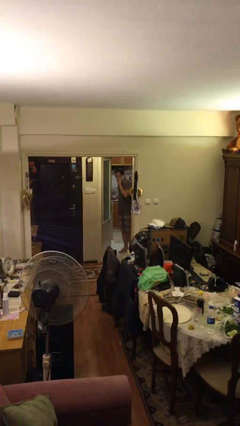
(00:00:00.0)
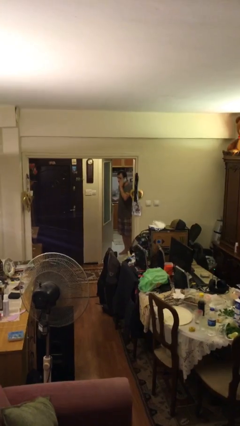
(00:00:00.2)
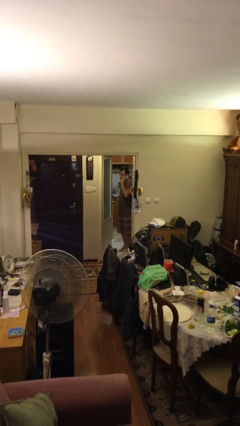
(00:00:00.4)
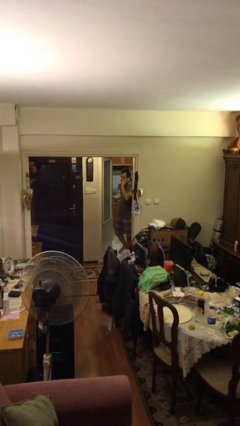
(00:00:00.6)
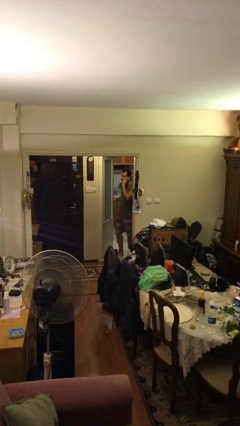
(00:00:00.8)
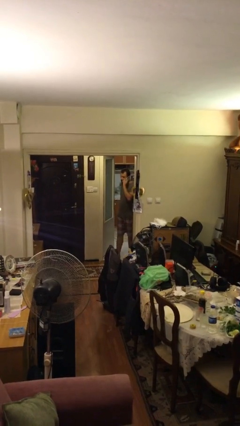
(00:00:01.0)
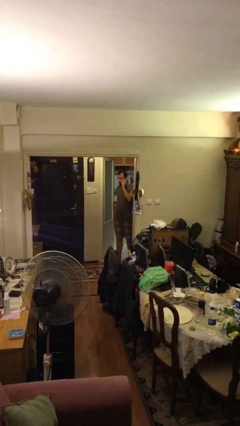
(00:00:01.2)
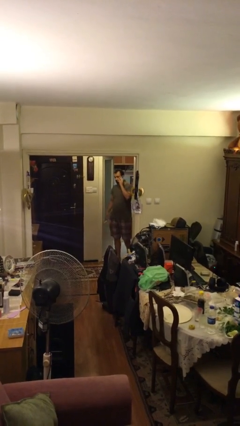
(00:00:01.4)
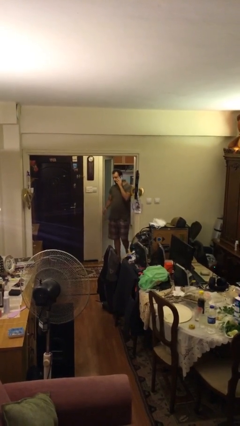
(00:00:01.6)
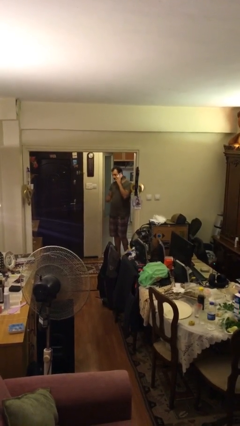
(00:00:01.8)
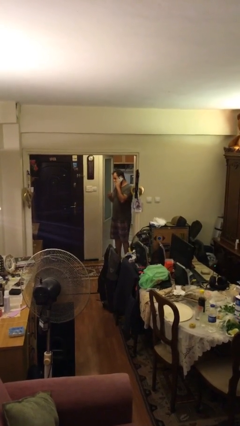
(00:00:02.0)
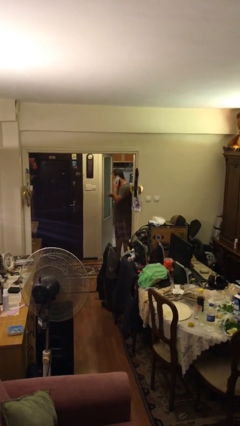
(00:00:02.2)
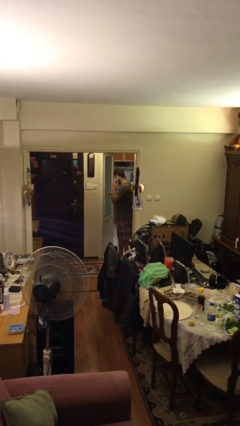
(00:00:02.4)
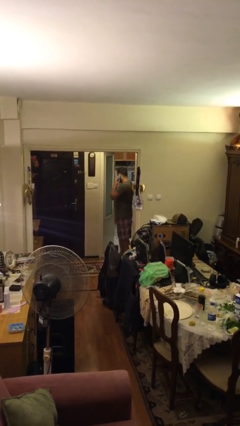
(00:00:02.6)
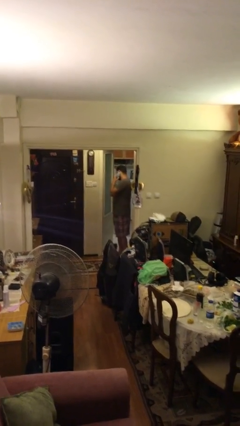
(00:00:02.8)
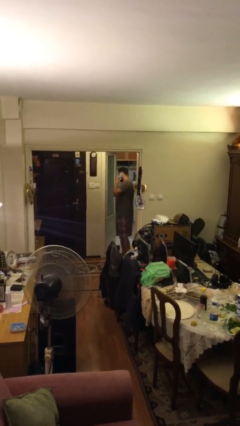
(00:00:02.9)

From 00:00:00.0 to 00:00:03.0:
person enters scene through structure

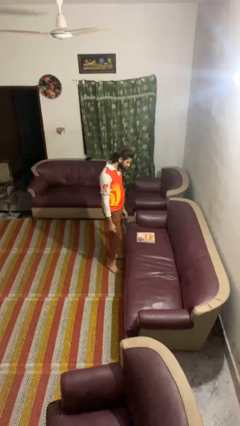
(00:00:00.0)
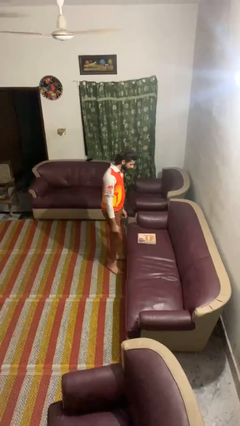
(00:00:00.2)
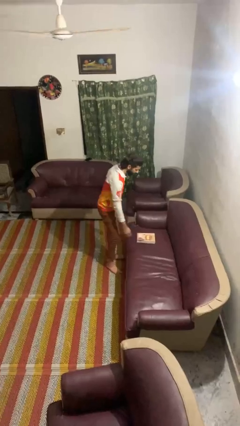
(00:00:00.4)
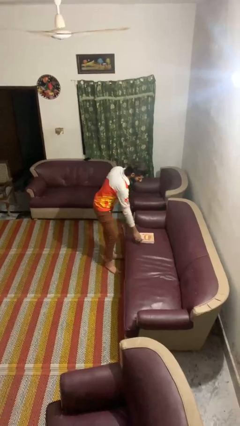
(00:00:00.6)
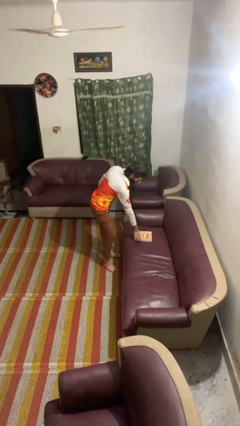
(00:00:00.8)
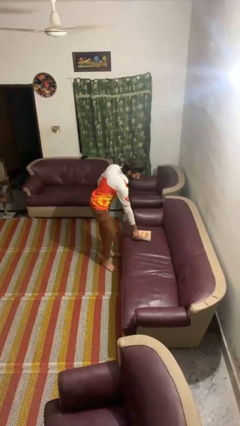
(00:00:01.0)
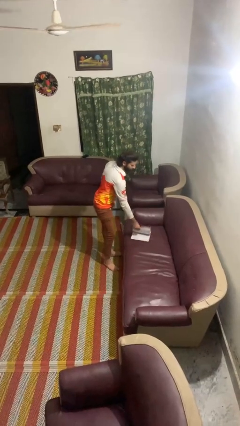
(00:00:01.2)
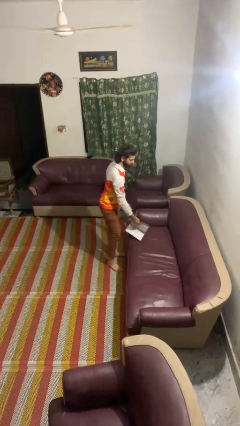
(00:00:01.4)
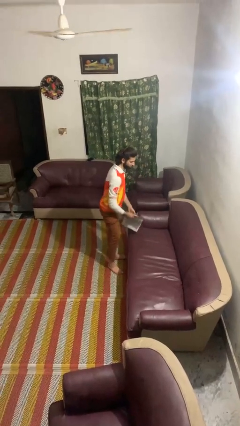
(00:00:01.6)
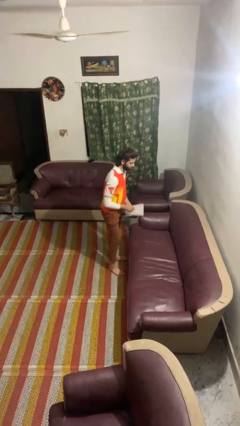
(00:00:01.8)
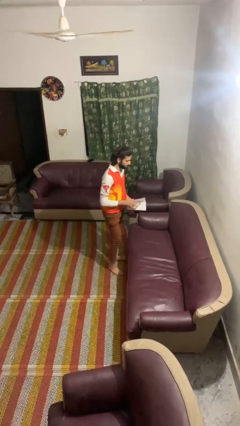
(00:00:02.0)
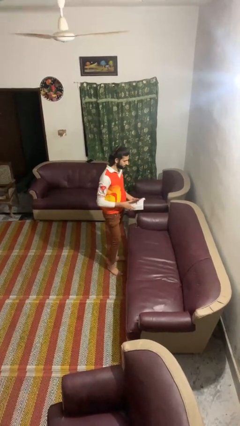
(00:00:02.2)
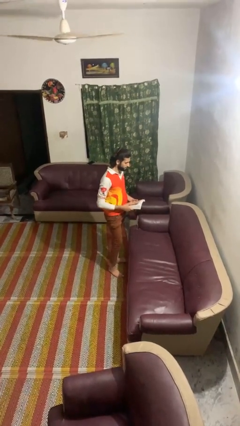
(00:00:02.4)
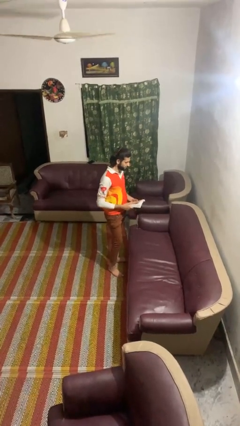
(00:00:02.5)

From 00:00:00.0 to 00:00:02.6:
person picks up object from couch

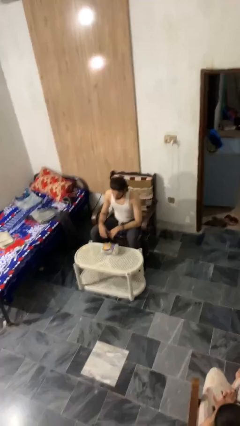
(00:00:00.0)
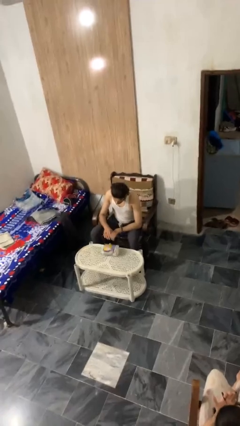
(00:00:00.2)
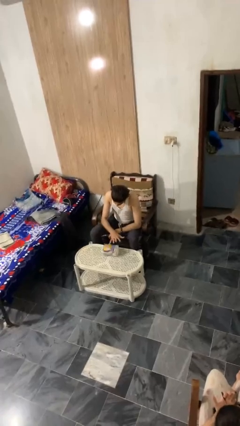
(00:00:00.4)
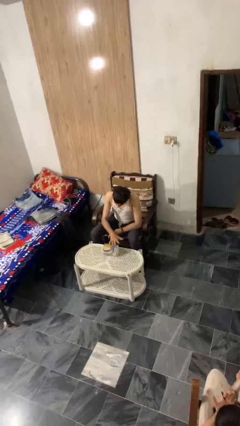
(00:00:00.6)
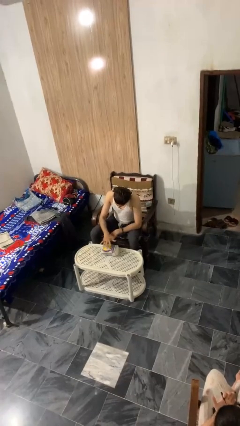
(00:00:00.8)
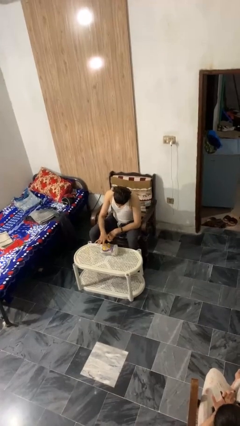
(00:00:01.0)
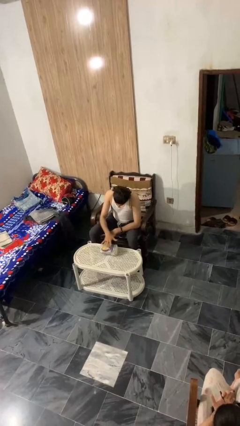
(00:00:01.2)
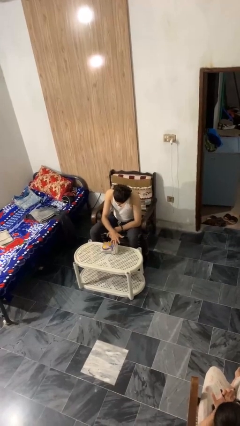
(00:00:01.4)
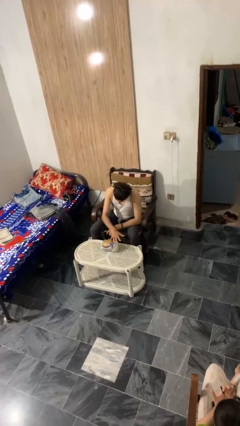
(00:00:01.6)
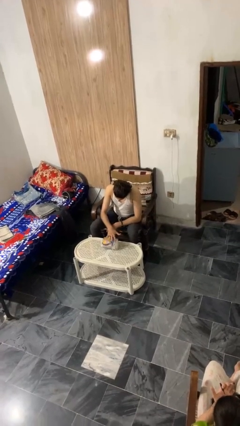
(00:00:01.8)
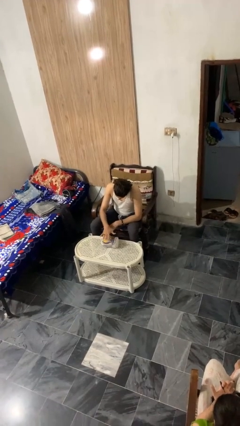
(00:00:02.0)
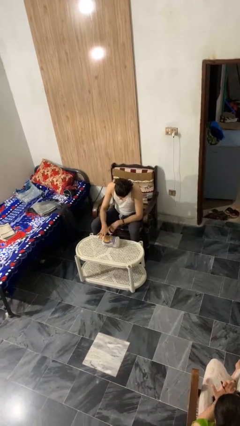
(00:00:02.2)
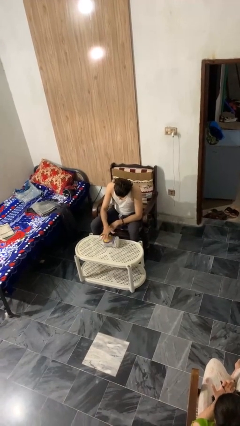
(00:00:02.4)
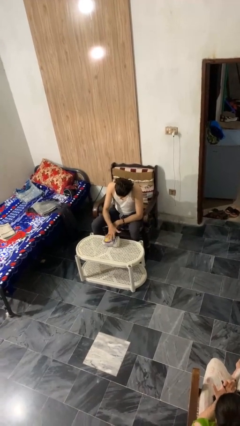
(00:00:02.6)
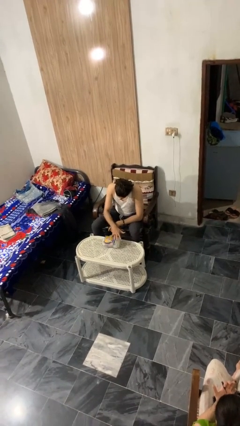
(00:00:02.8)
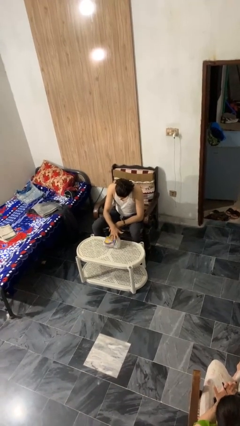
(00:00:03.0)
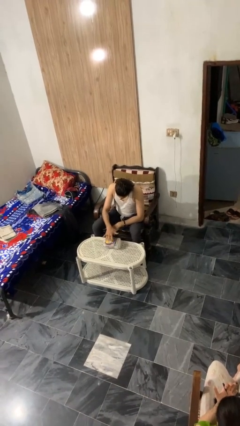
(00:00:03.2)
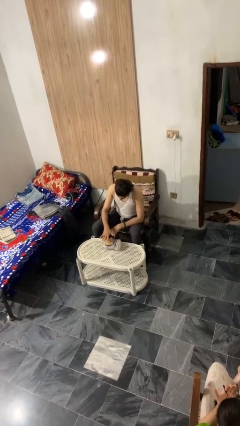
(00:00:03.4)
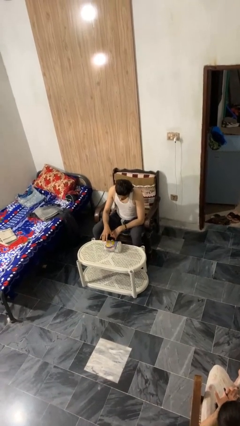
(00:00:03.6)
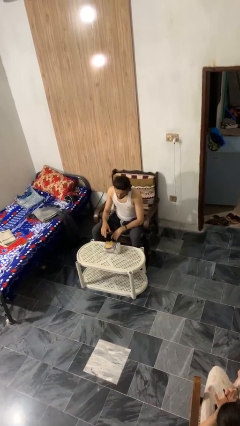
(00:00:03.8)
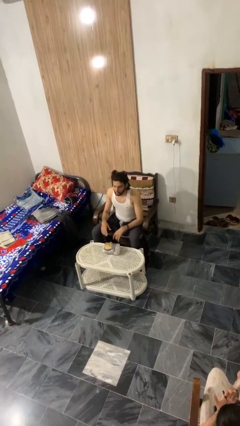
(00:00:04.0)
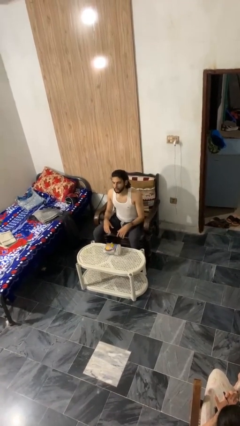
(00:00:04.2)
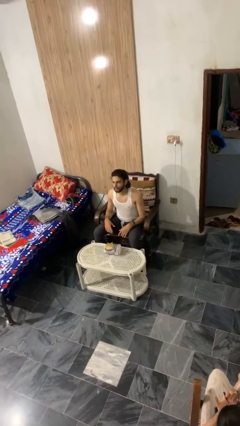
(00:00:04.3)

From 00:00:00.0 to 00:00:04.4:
person waves hand over object

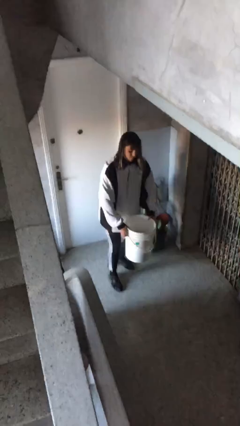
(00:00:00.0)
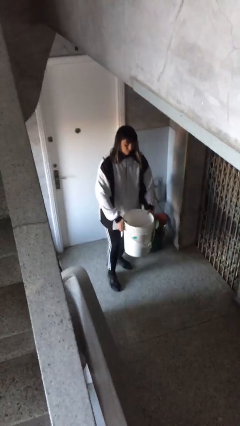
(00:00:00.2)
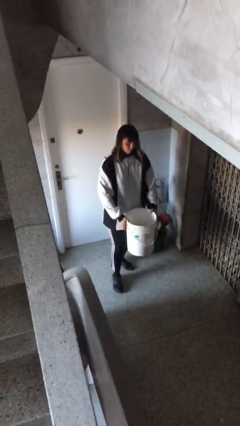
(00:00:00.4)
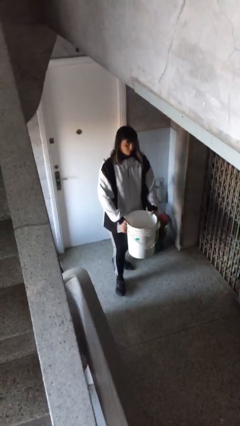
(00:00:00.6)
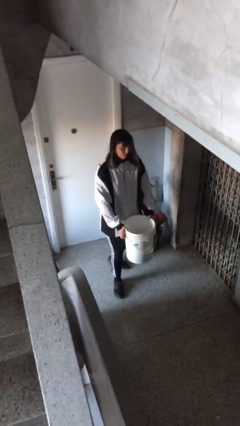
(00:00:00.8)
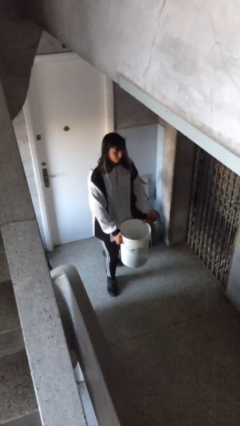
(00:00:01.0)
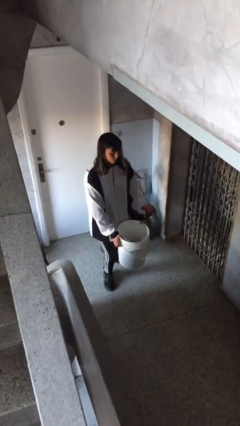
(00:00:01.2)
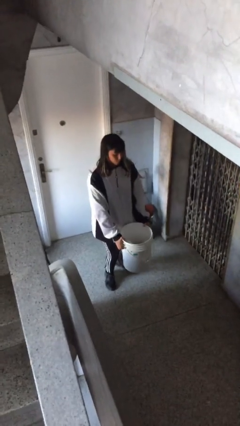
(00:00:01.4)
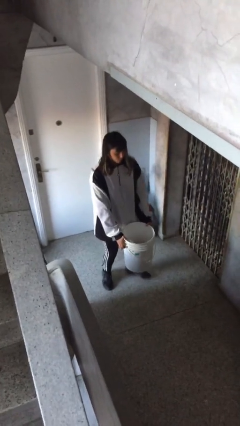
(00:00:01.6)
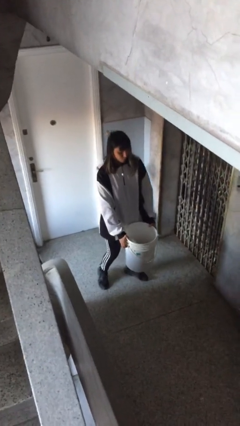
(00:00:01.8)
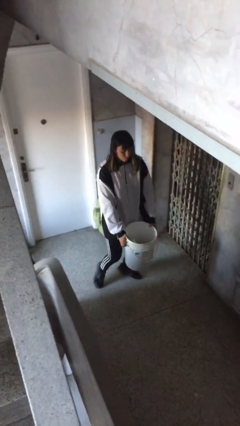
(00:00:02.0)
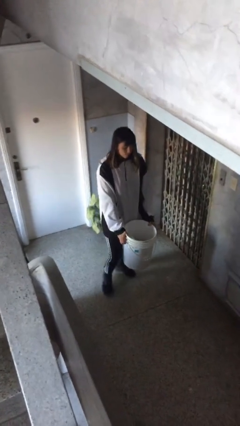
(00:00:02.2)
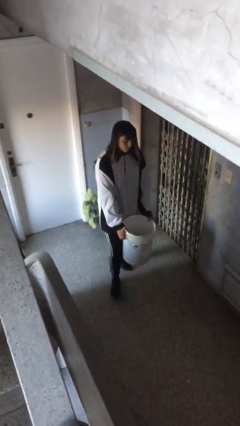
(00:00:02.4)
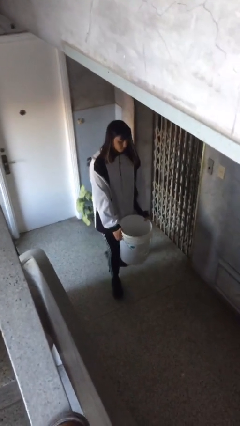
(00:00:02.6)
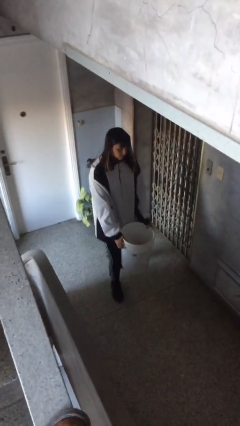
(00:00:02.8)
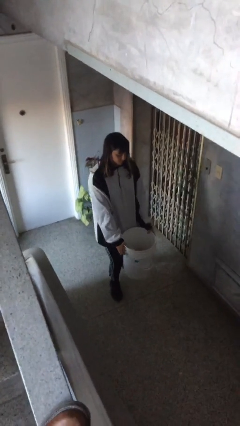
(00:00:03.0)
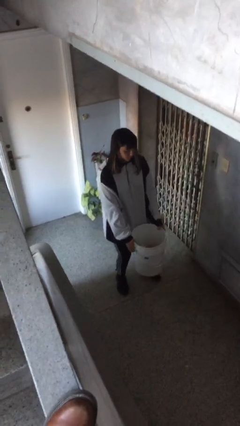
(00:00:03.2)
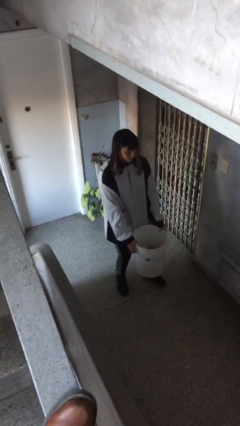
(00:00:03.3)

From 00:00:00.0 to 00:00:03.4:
person carries heavy object

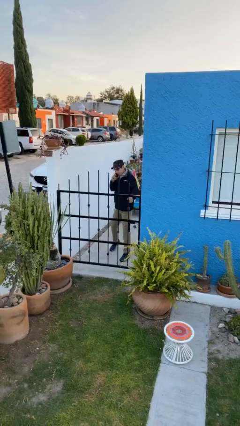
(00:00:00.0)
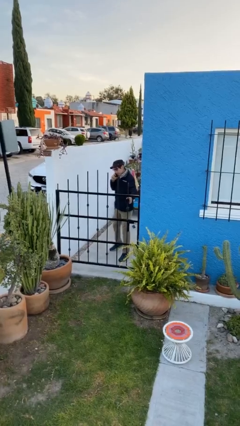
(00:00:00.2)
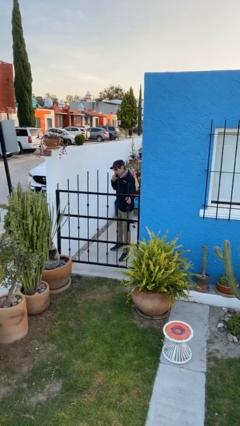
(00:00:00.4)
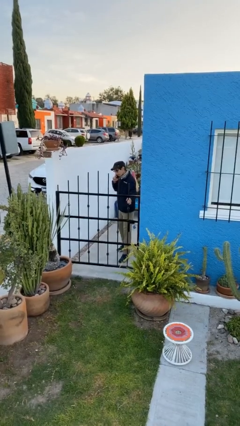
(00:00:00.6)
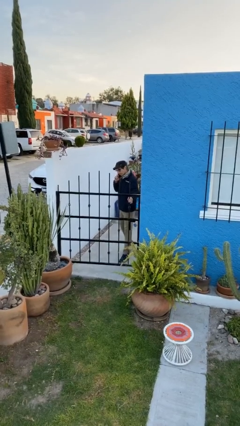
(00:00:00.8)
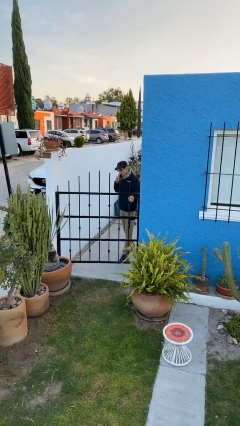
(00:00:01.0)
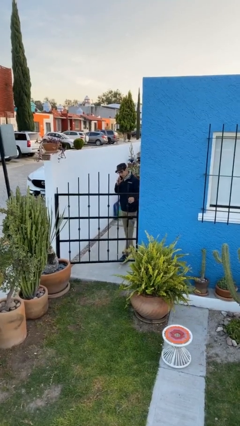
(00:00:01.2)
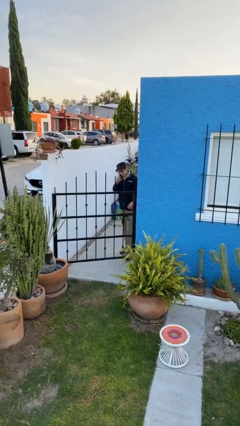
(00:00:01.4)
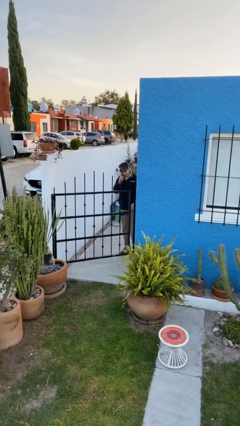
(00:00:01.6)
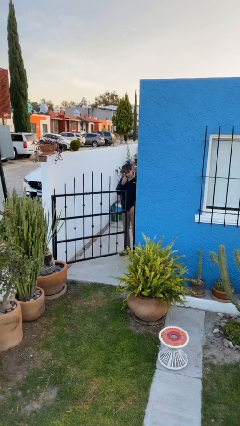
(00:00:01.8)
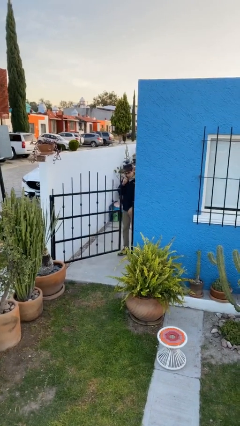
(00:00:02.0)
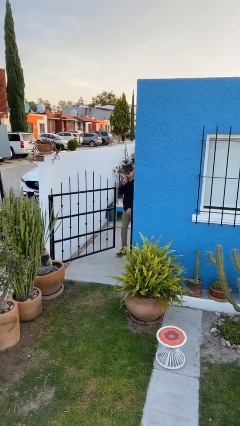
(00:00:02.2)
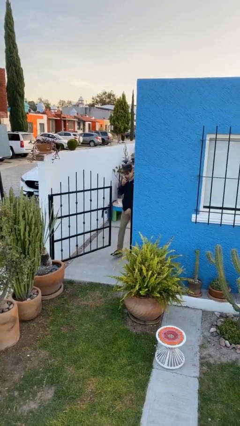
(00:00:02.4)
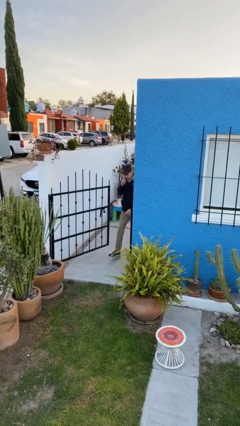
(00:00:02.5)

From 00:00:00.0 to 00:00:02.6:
person opens facility door

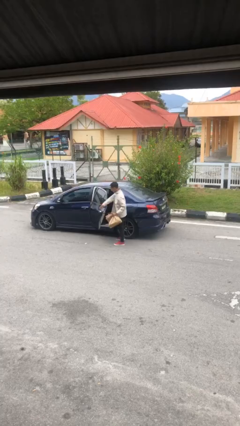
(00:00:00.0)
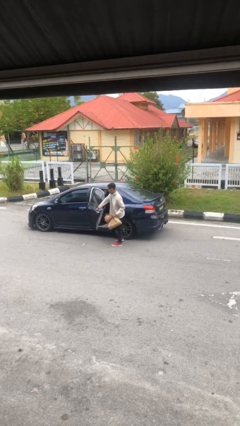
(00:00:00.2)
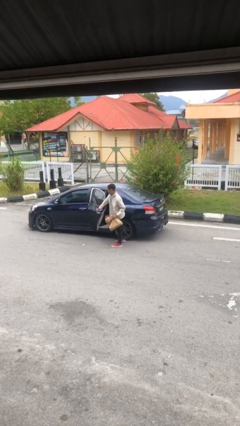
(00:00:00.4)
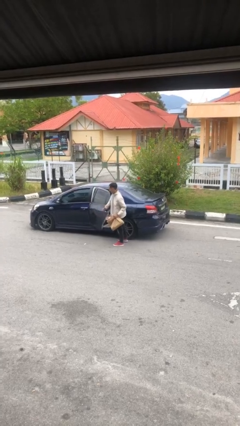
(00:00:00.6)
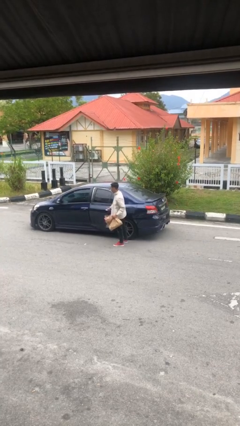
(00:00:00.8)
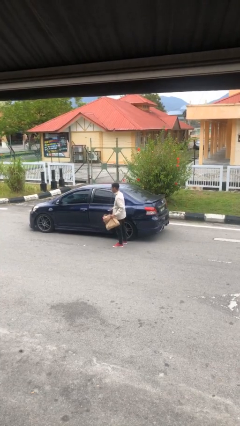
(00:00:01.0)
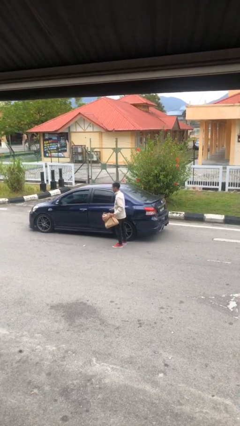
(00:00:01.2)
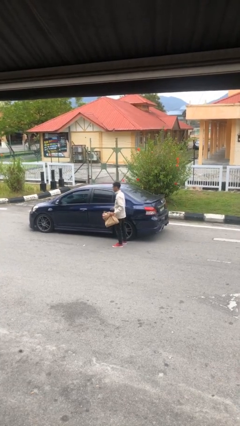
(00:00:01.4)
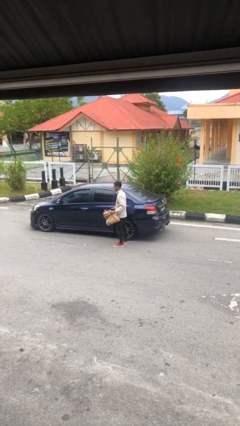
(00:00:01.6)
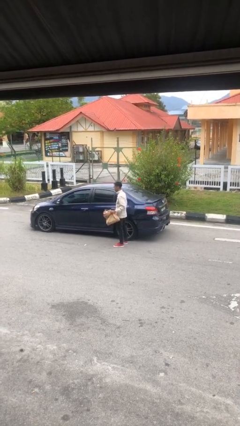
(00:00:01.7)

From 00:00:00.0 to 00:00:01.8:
person closes car door
